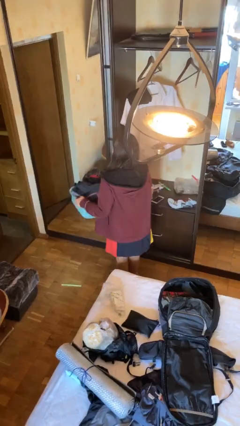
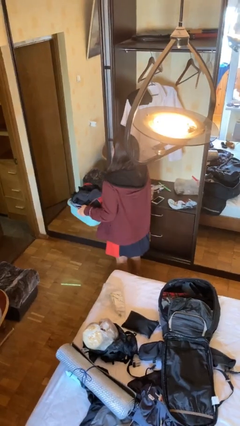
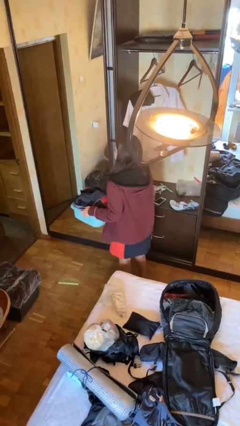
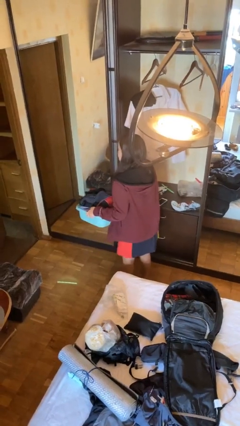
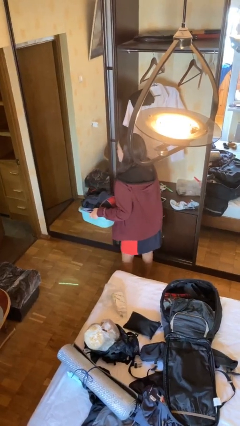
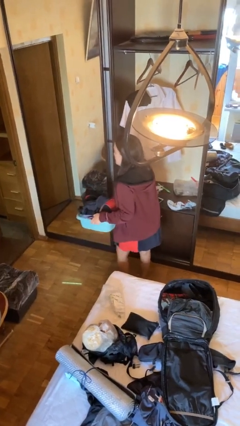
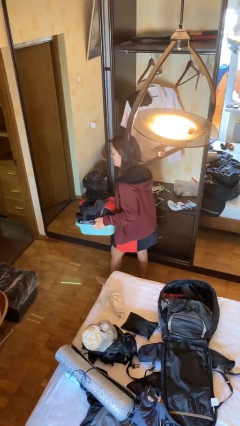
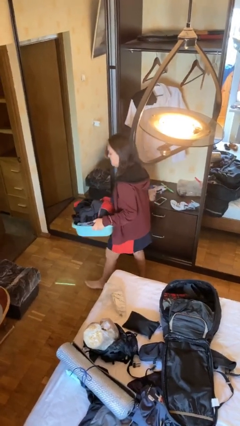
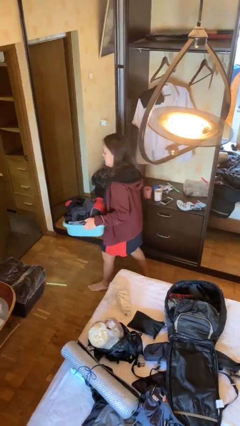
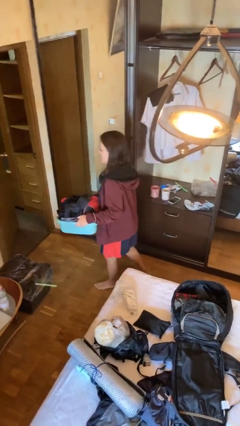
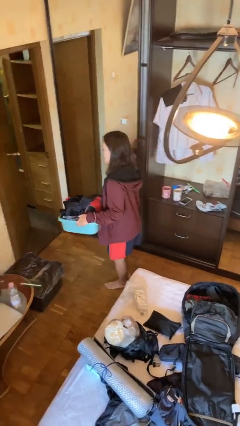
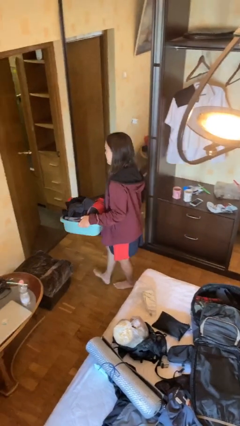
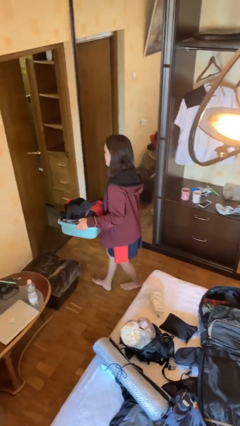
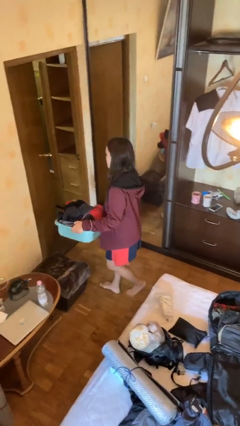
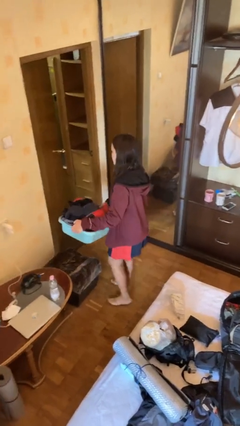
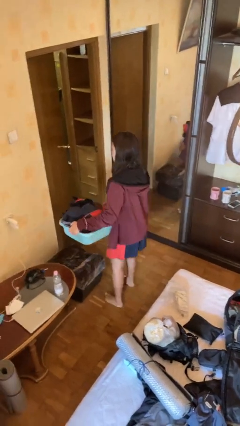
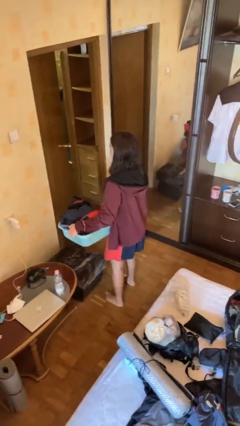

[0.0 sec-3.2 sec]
person carries laundry basket
